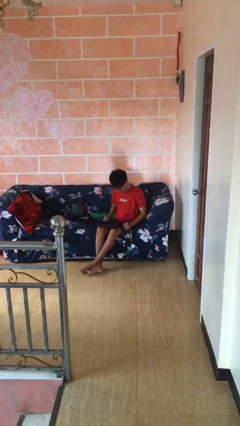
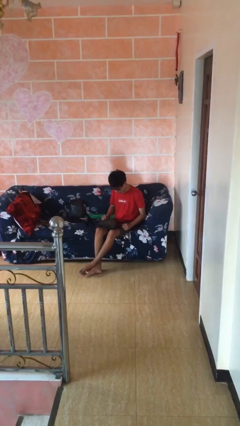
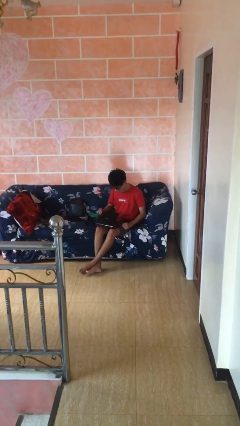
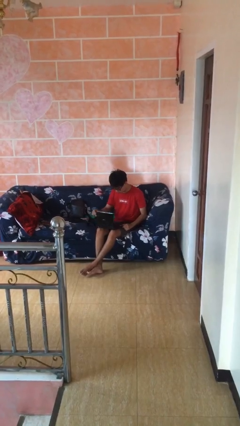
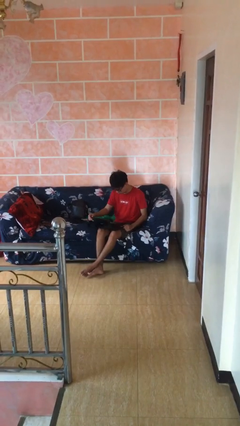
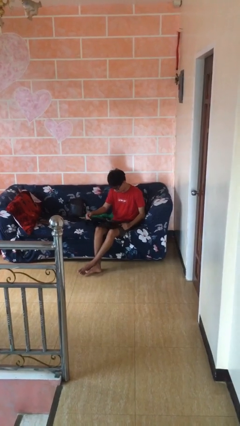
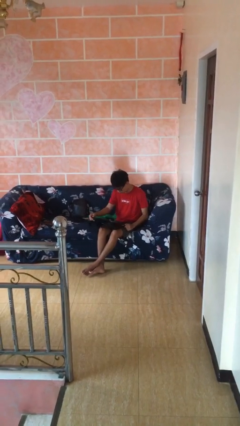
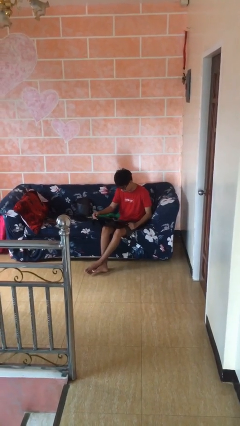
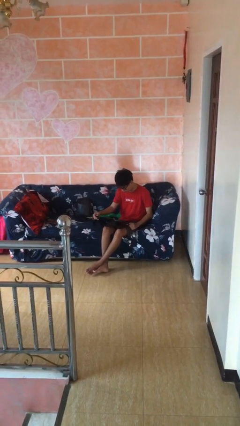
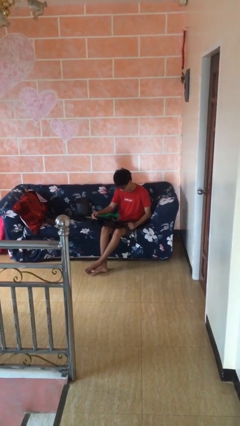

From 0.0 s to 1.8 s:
person interacts with laptop

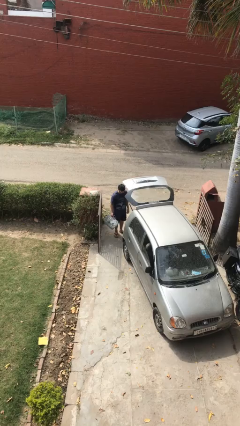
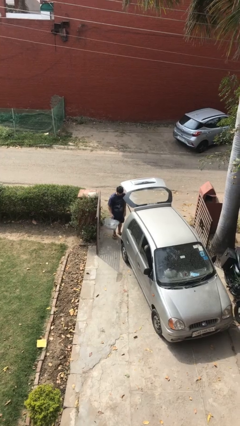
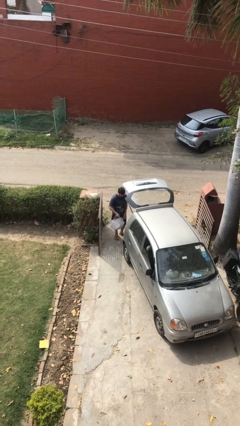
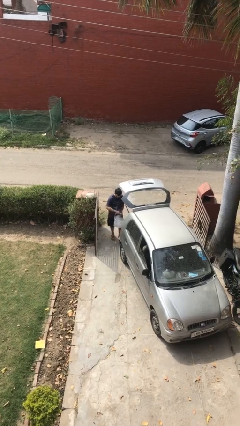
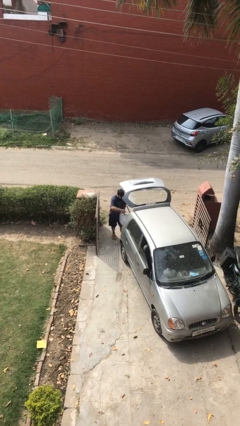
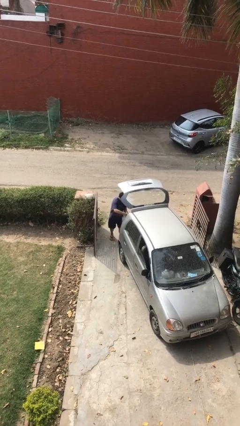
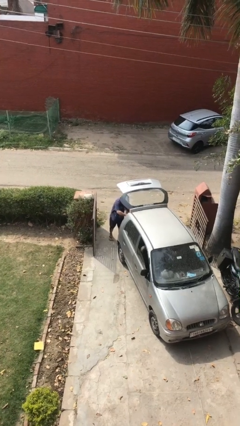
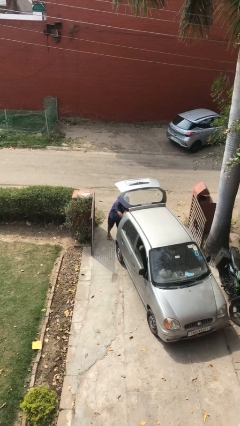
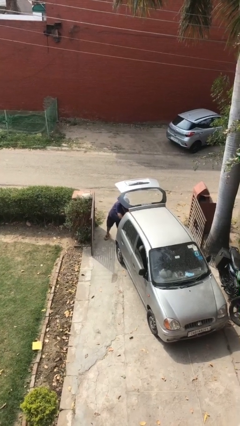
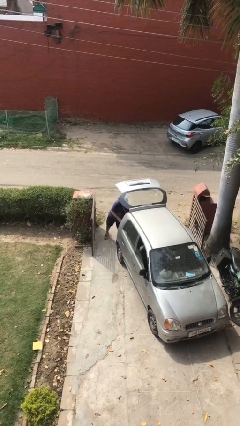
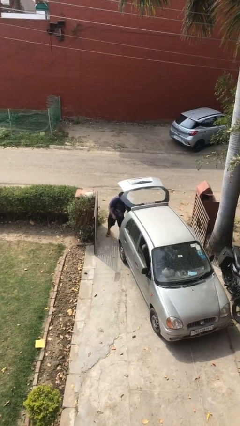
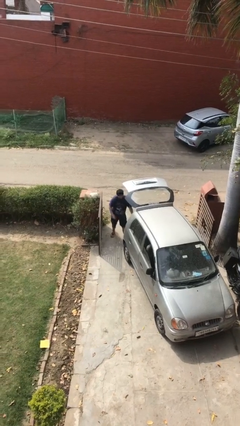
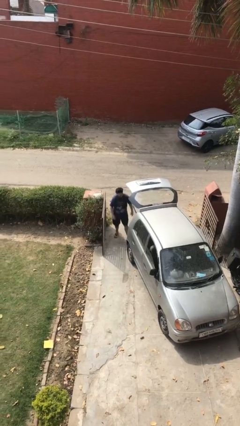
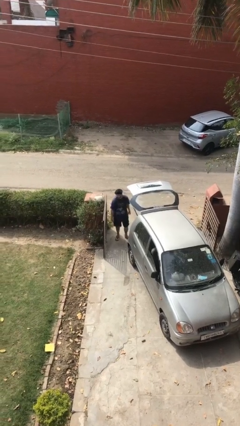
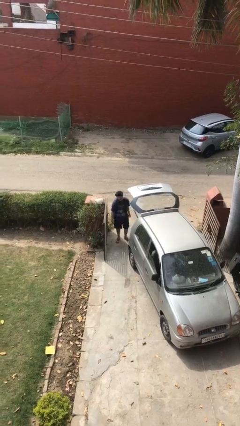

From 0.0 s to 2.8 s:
person loads car

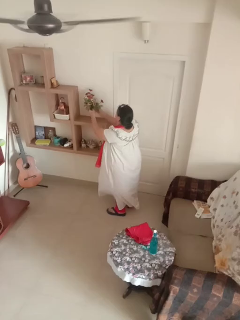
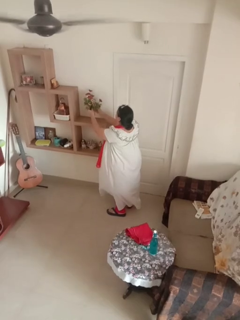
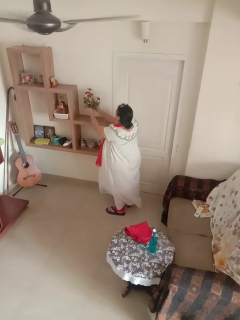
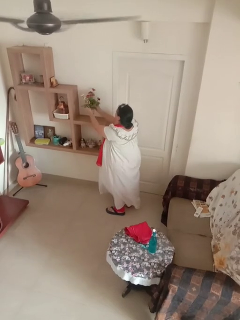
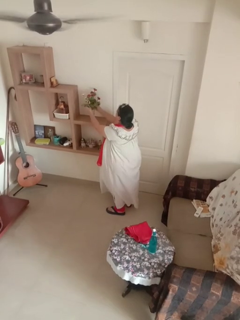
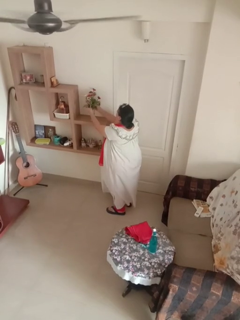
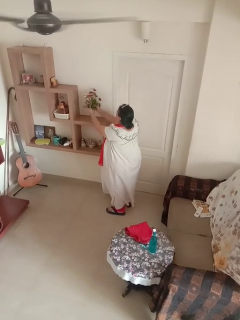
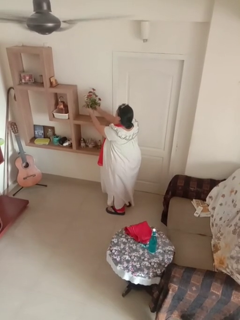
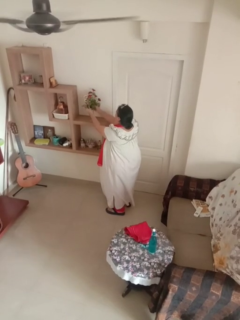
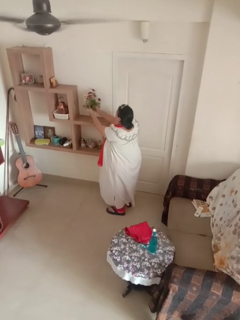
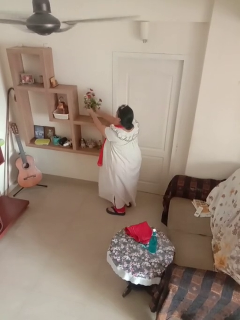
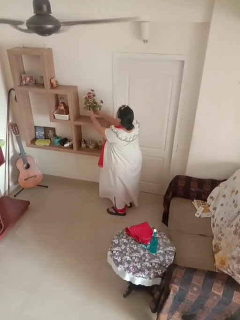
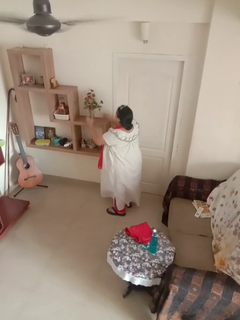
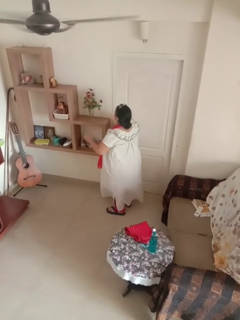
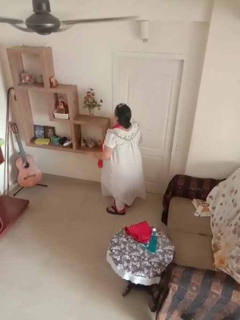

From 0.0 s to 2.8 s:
person arranges flowers in vase

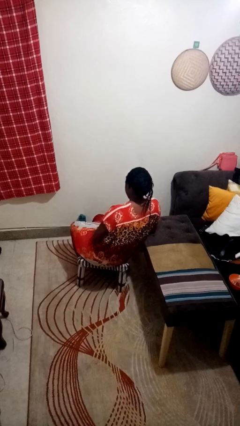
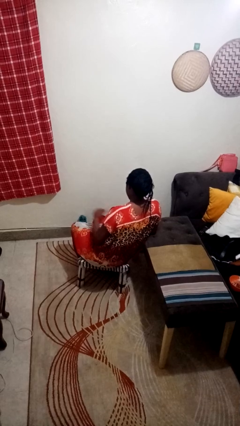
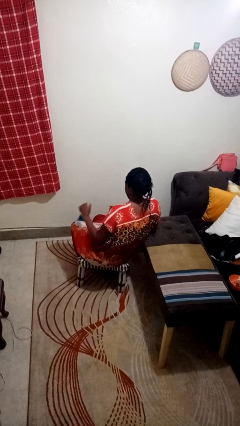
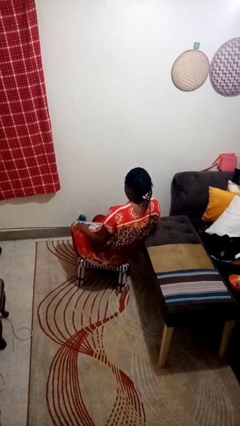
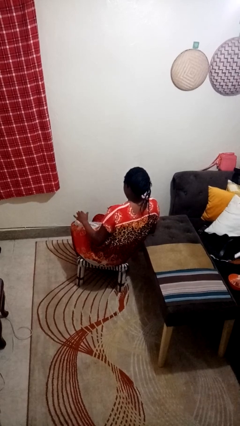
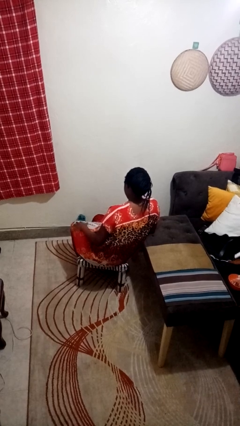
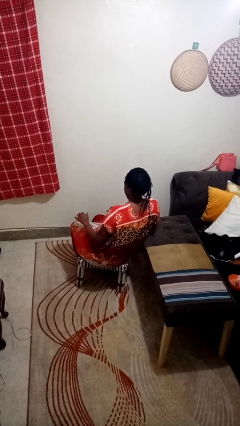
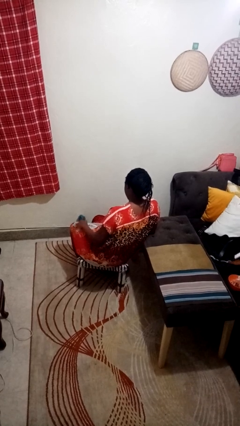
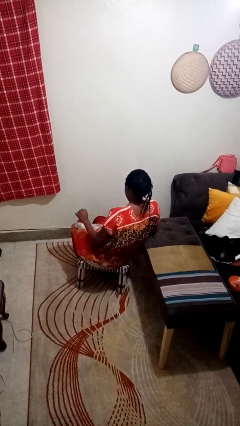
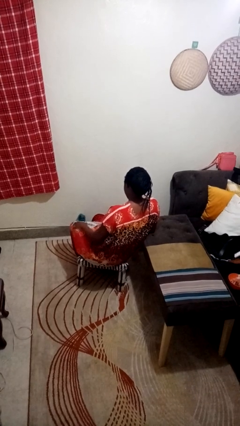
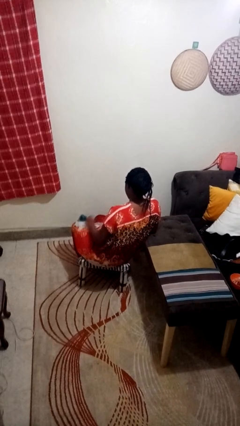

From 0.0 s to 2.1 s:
person slaps hands on thighs

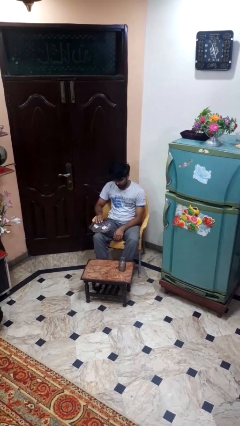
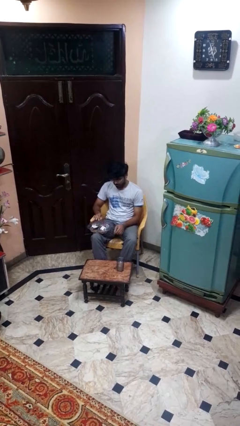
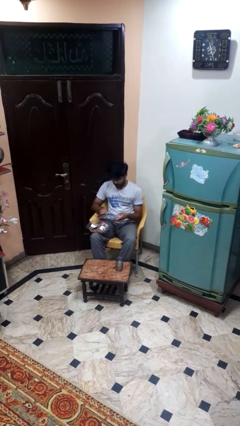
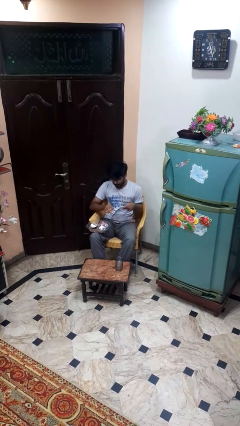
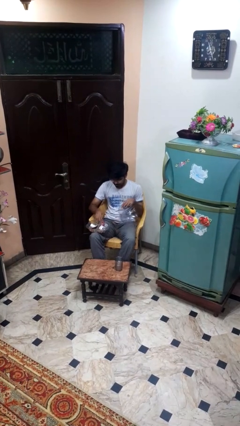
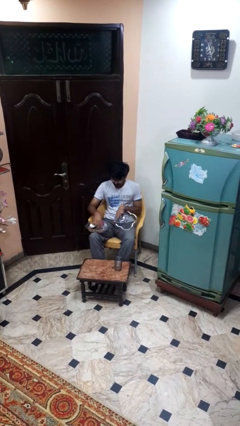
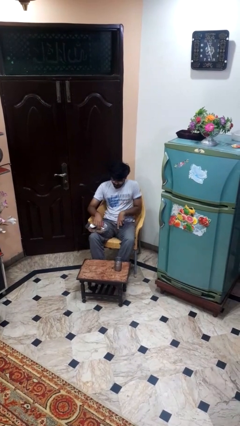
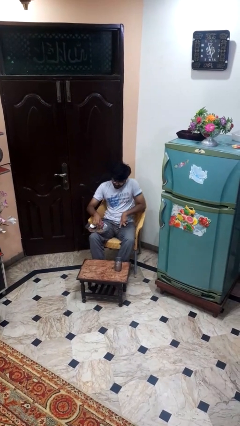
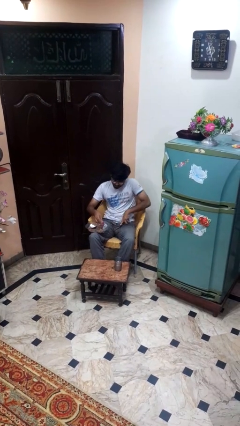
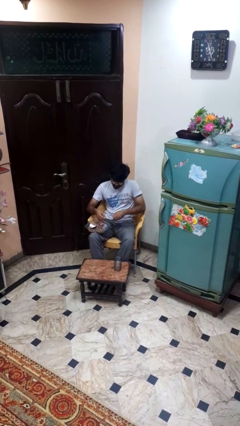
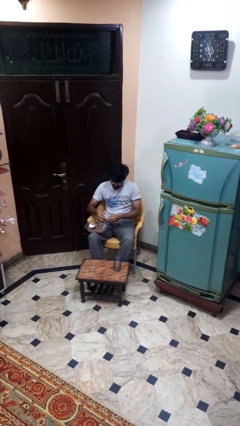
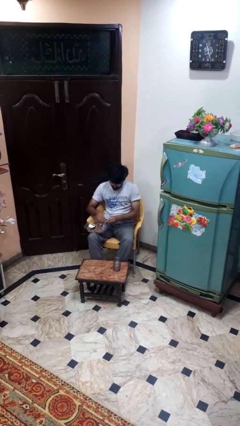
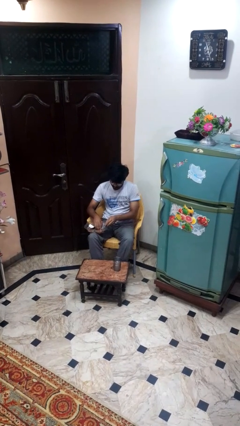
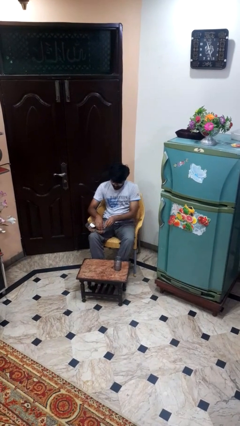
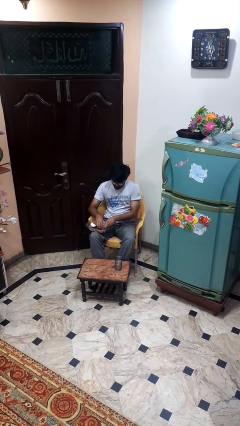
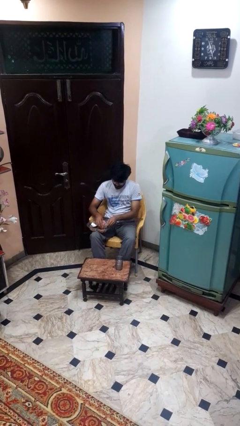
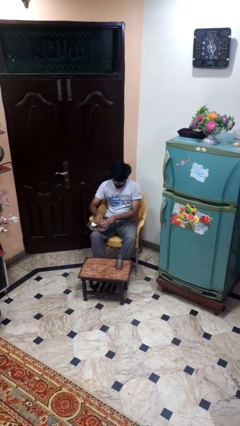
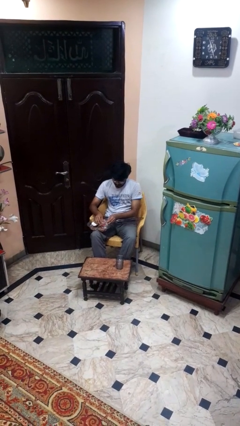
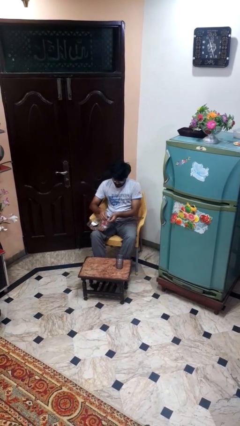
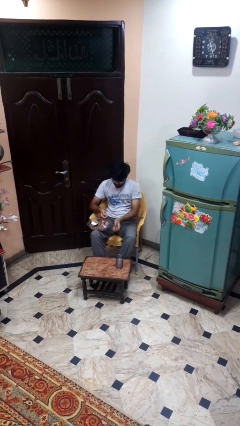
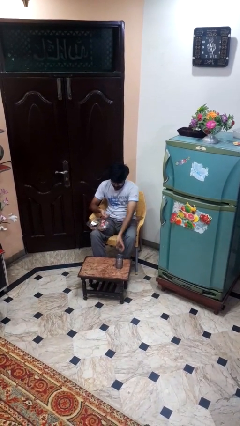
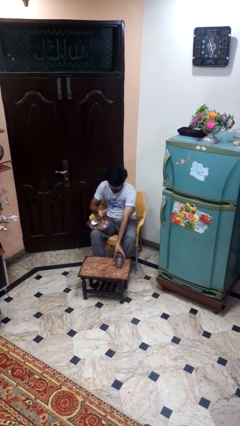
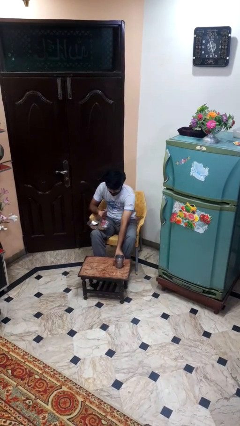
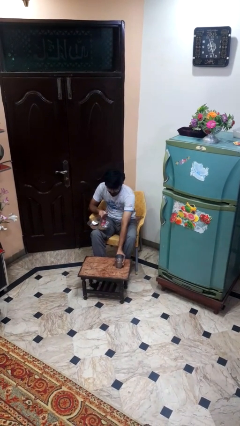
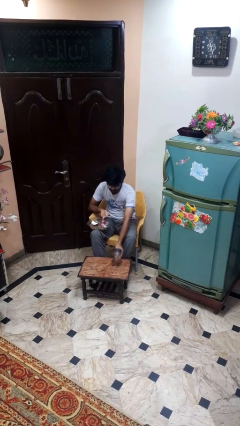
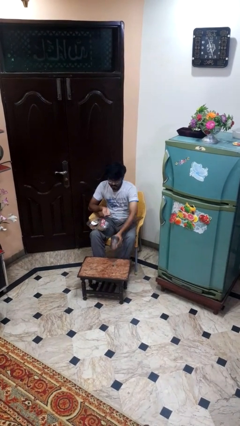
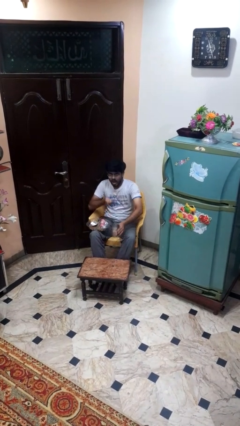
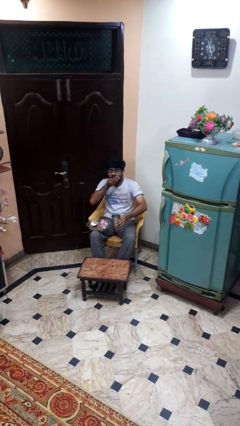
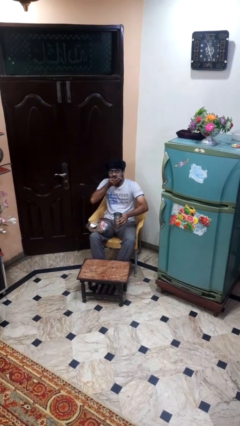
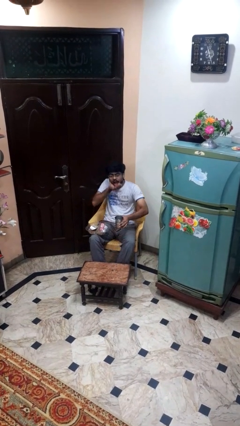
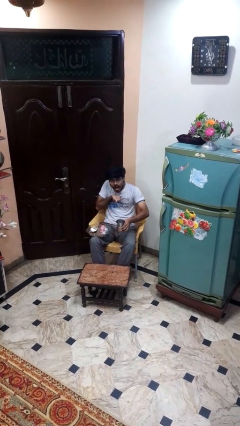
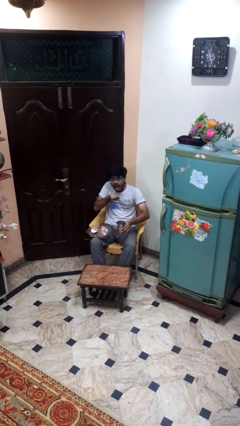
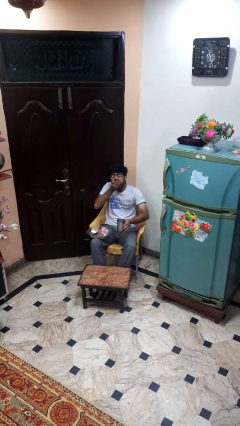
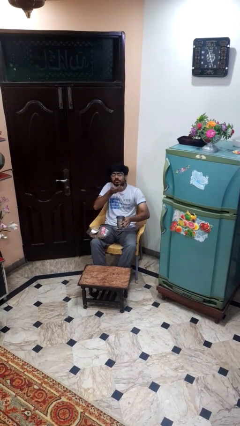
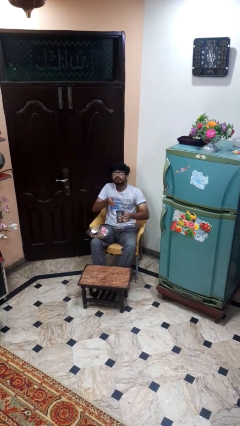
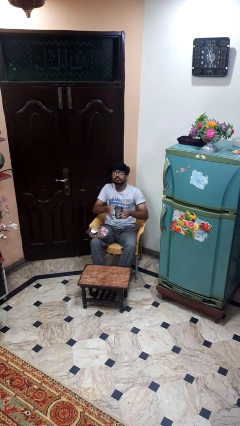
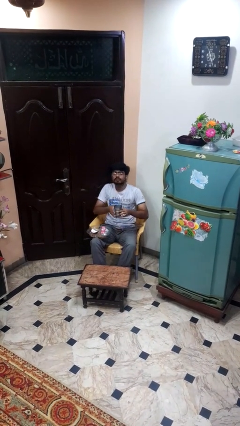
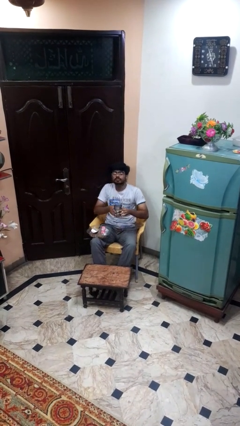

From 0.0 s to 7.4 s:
person takes medicine pills

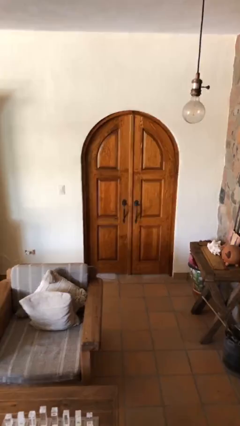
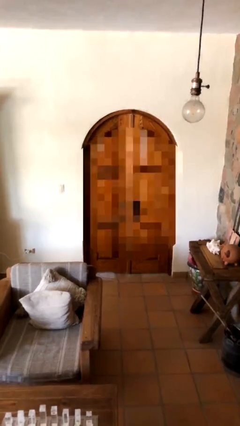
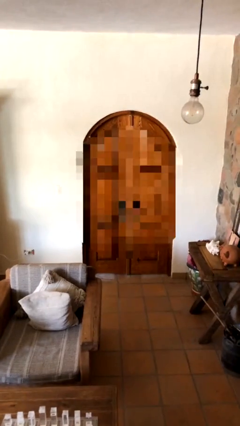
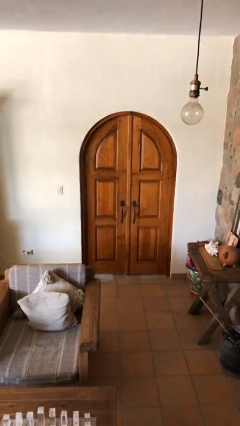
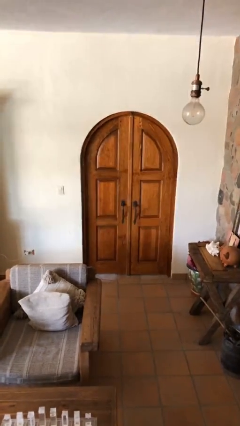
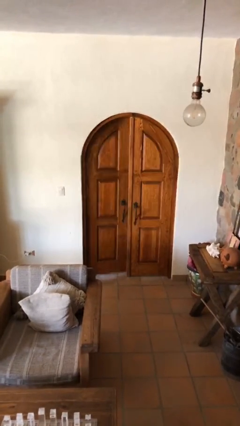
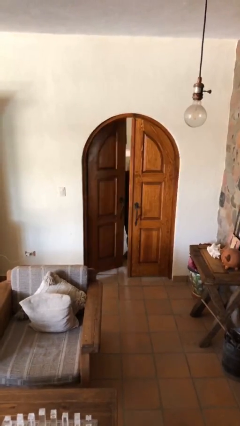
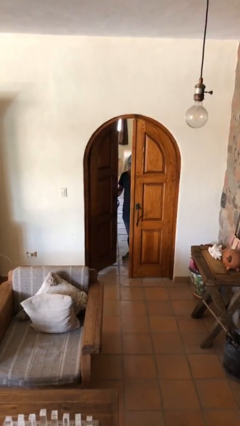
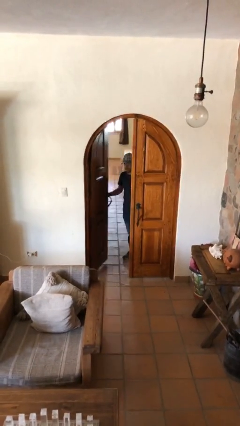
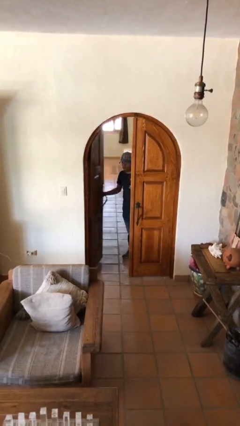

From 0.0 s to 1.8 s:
person opens facility door
